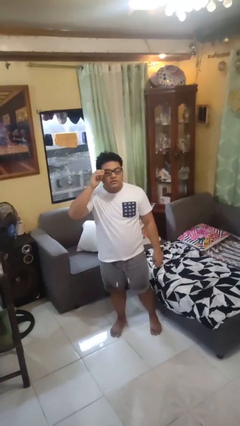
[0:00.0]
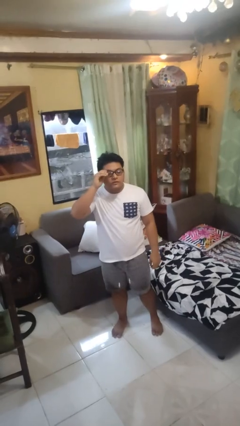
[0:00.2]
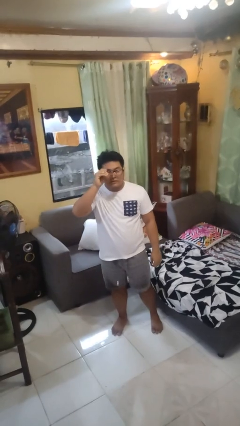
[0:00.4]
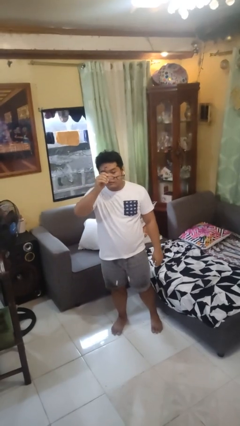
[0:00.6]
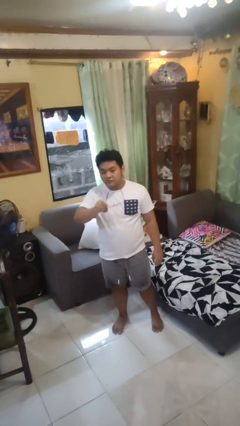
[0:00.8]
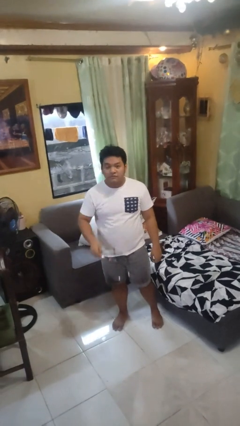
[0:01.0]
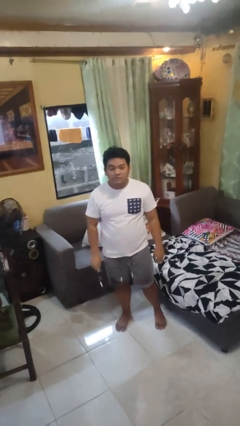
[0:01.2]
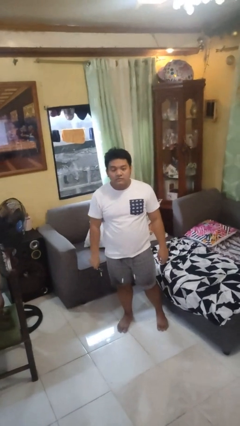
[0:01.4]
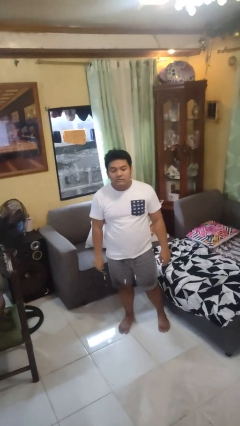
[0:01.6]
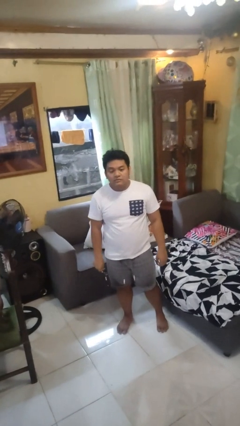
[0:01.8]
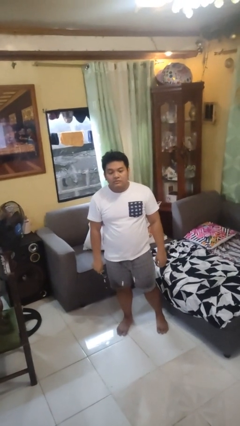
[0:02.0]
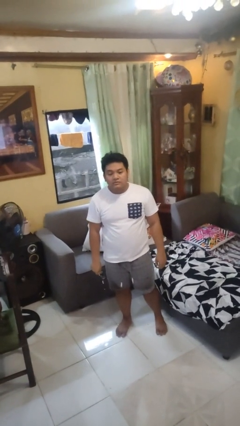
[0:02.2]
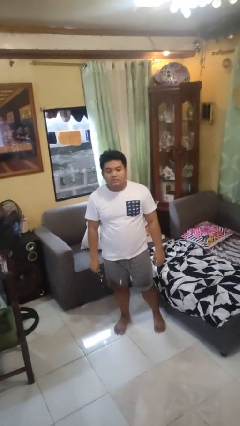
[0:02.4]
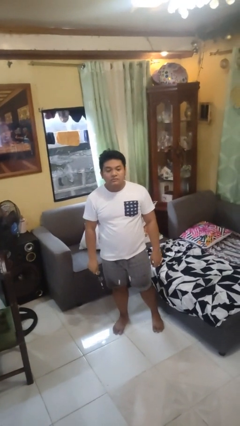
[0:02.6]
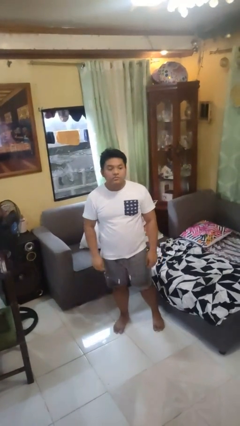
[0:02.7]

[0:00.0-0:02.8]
person takes off glasses

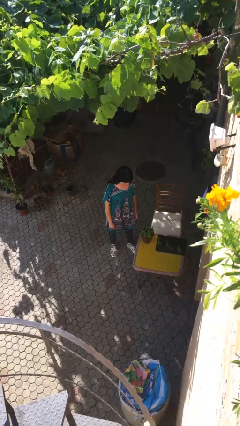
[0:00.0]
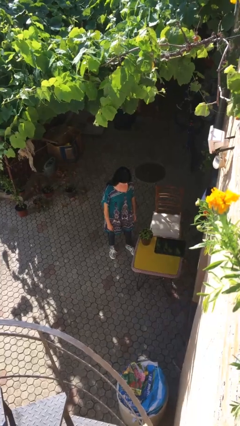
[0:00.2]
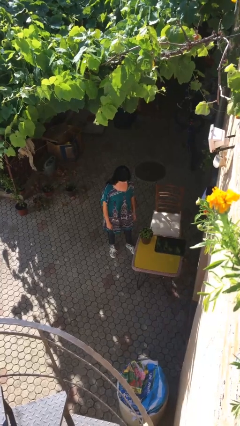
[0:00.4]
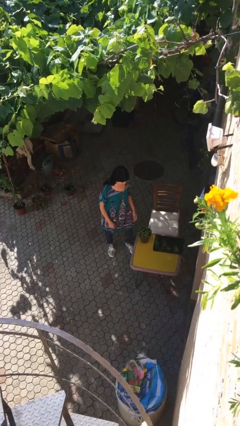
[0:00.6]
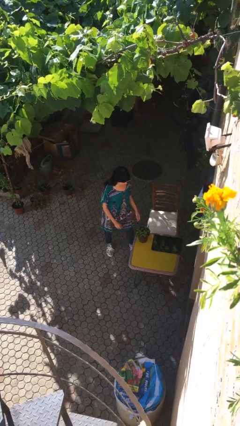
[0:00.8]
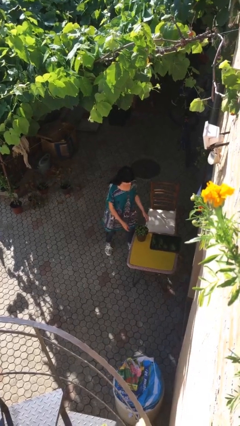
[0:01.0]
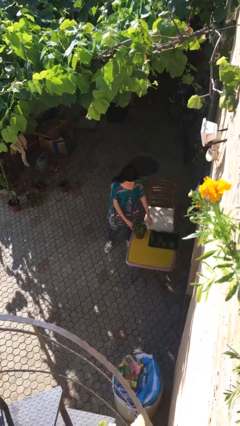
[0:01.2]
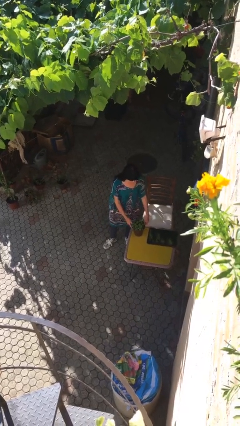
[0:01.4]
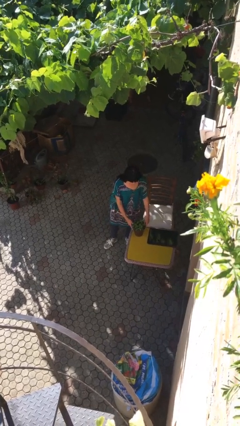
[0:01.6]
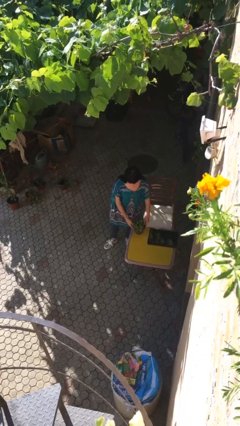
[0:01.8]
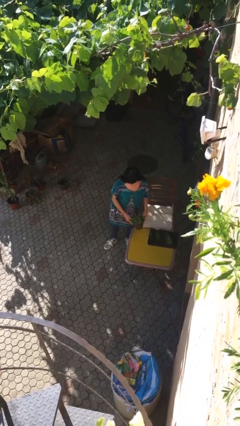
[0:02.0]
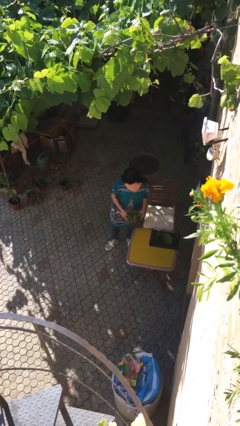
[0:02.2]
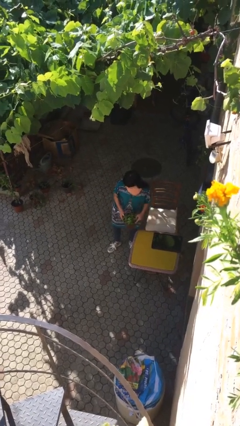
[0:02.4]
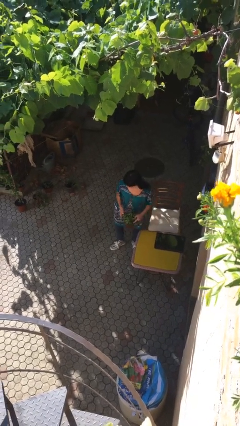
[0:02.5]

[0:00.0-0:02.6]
person picks up object from table

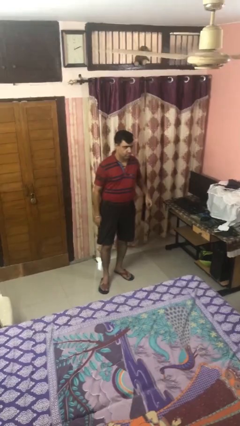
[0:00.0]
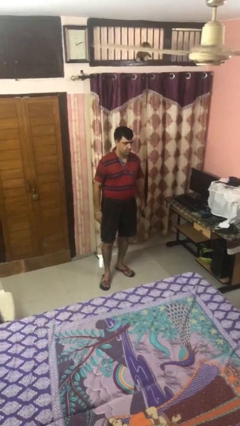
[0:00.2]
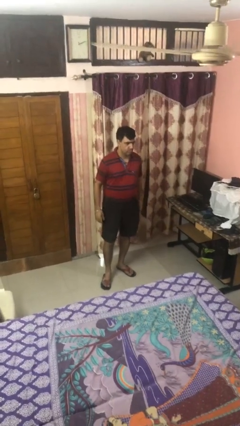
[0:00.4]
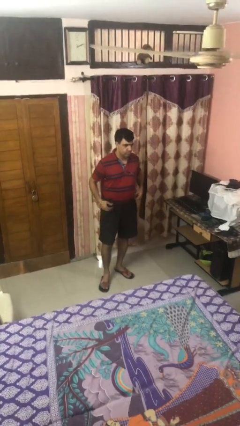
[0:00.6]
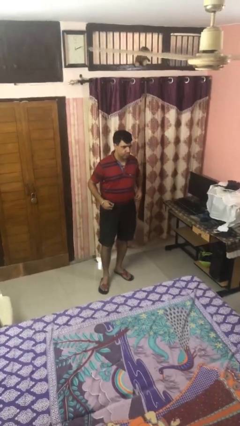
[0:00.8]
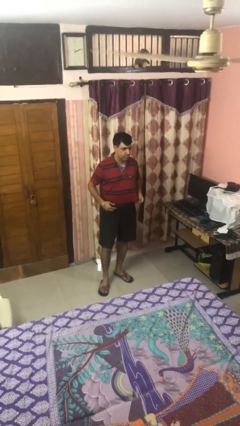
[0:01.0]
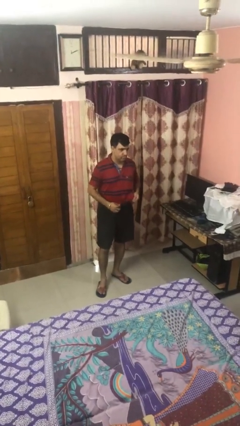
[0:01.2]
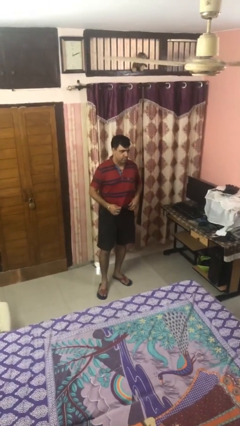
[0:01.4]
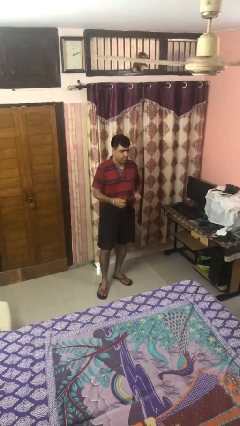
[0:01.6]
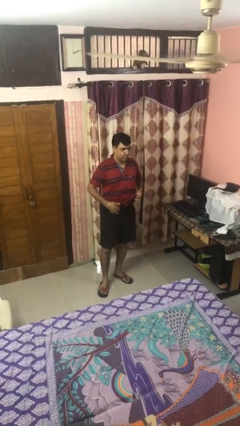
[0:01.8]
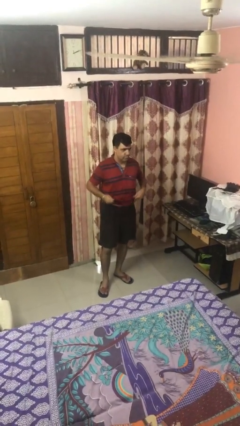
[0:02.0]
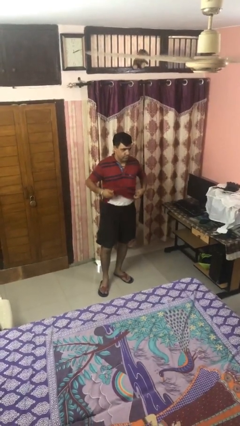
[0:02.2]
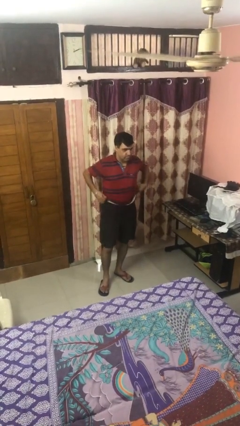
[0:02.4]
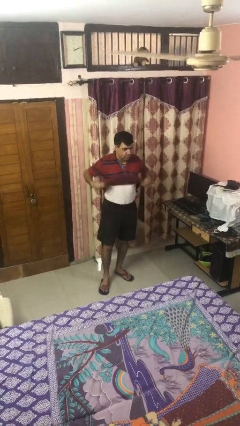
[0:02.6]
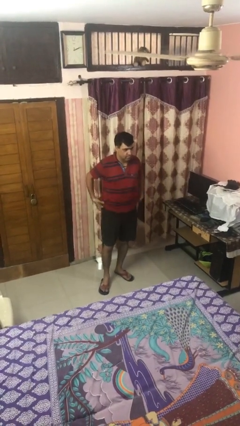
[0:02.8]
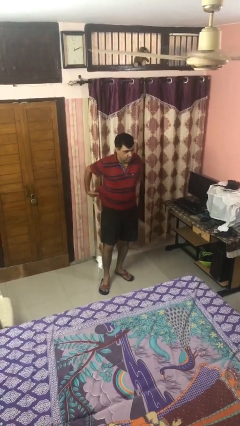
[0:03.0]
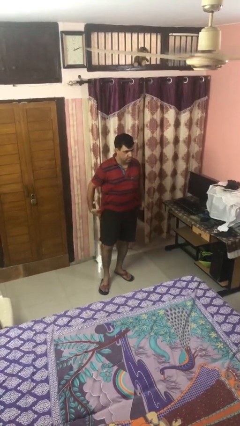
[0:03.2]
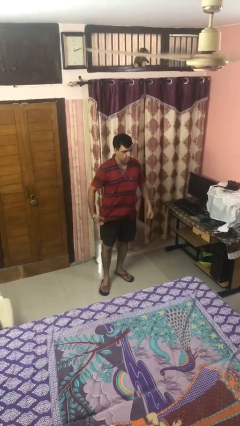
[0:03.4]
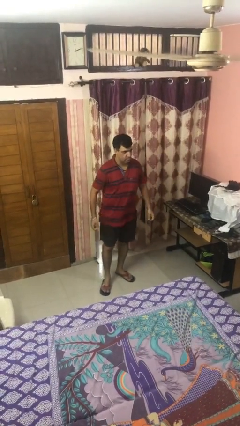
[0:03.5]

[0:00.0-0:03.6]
person untucks shirt

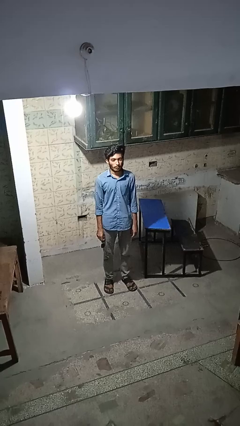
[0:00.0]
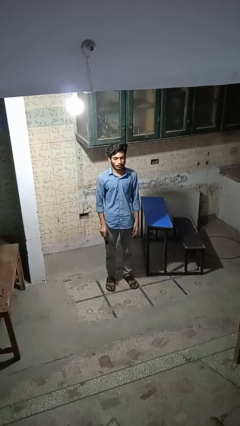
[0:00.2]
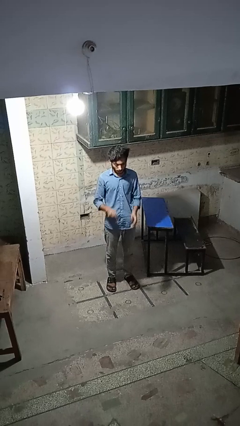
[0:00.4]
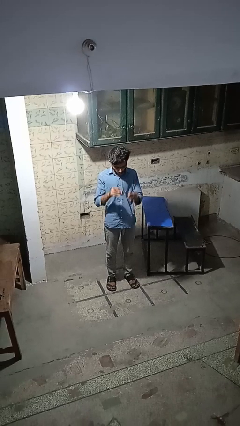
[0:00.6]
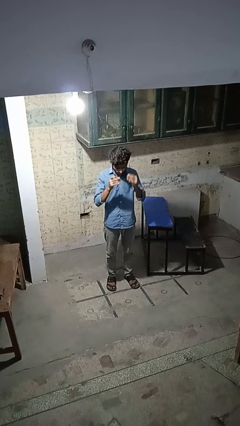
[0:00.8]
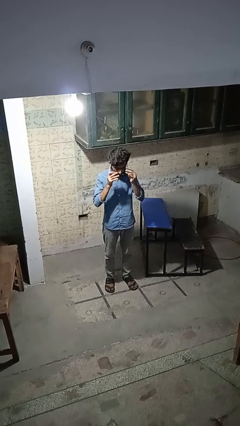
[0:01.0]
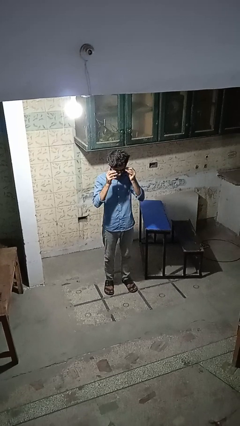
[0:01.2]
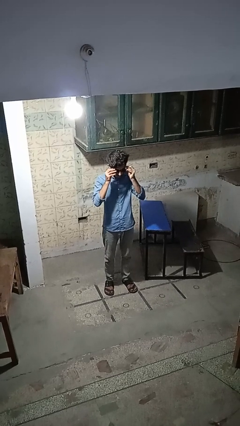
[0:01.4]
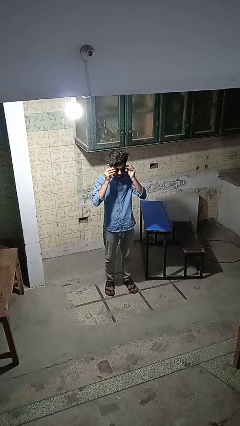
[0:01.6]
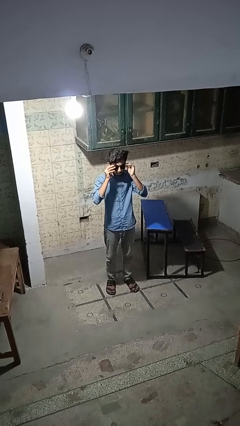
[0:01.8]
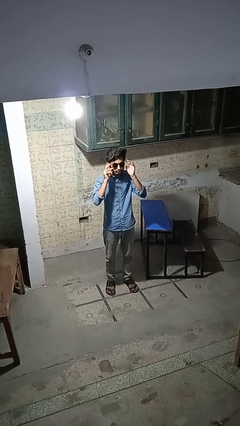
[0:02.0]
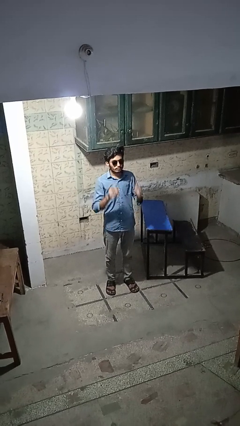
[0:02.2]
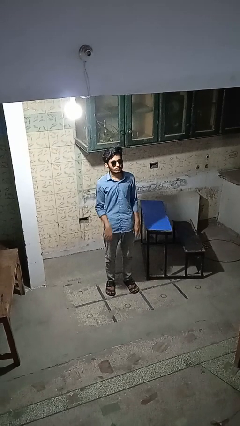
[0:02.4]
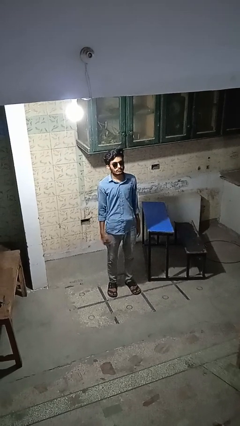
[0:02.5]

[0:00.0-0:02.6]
person puts on sunglasses

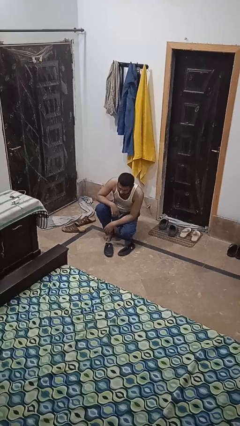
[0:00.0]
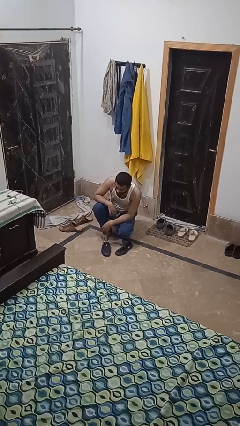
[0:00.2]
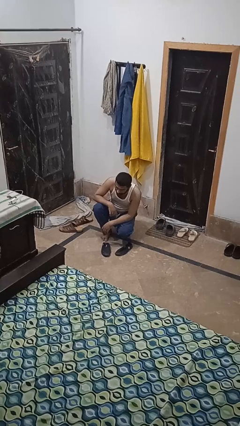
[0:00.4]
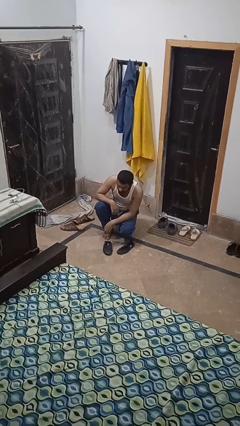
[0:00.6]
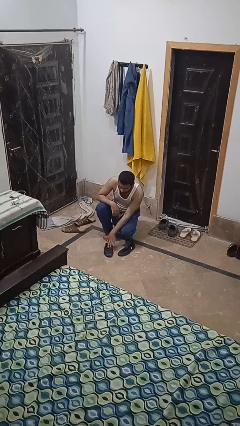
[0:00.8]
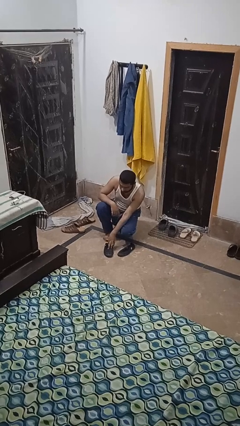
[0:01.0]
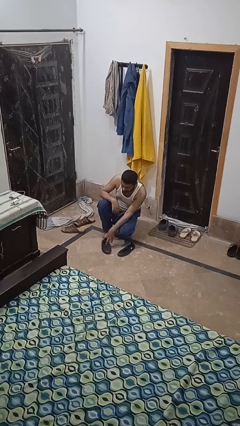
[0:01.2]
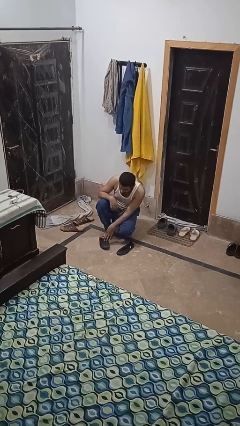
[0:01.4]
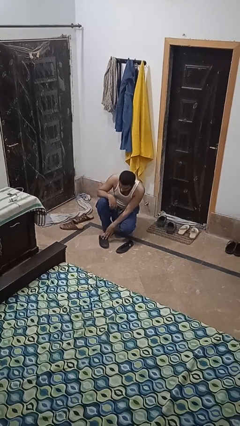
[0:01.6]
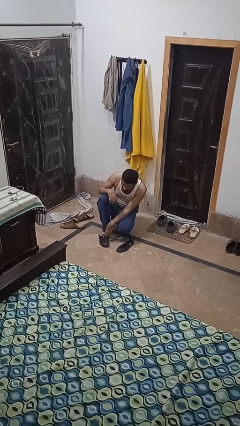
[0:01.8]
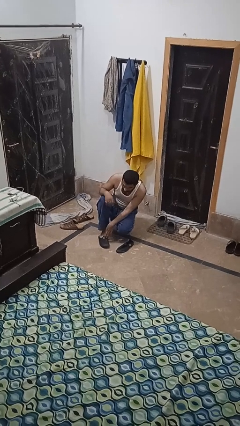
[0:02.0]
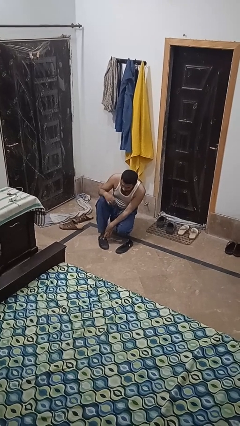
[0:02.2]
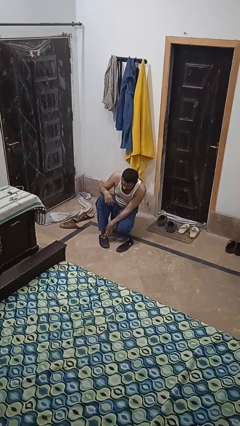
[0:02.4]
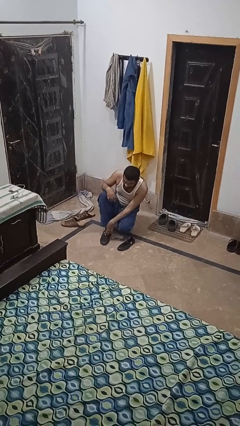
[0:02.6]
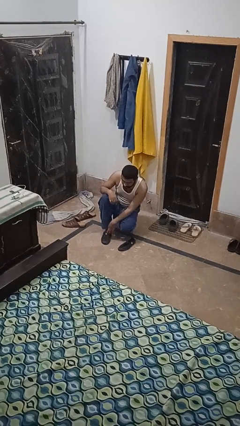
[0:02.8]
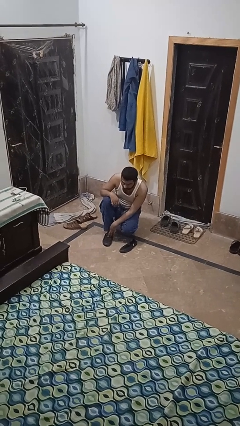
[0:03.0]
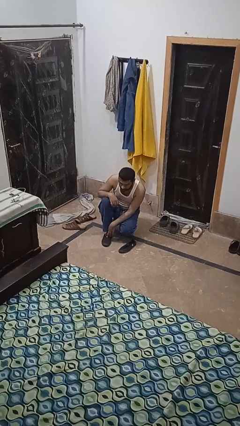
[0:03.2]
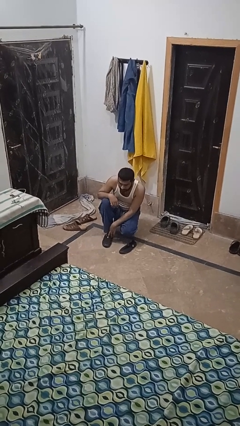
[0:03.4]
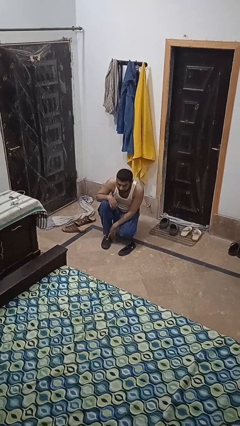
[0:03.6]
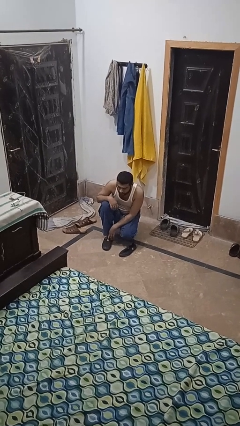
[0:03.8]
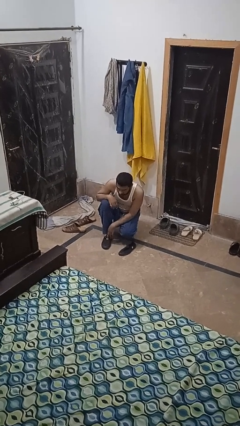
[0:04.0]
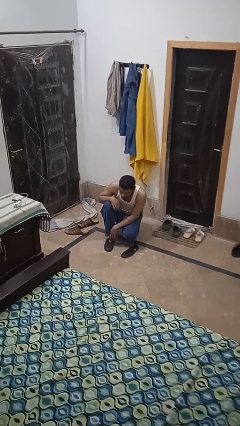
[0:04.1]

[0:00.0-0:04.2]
person puts on shoes

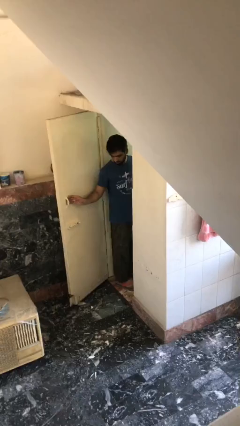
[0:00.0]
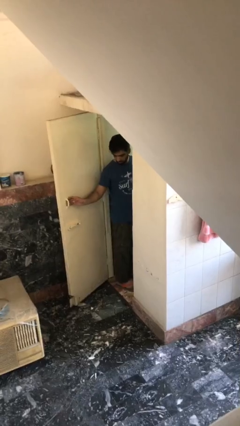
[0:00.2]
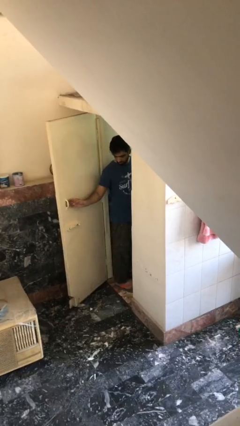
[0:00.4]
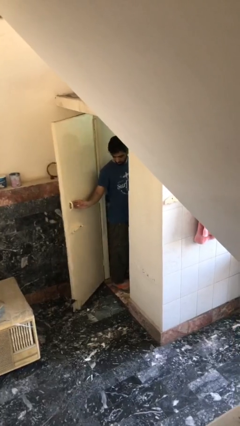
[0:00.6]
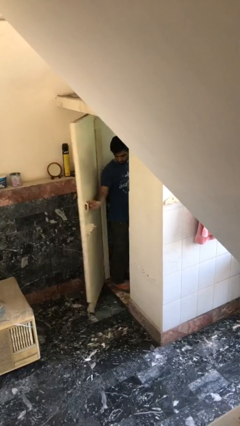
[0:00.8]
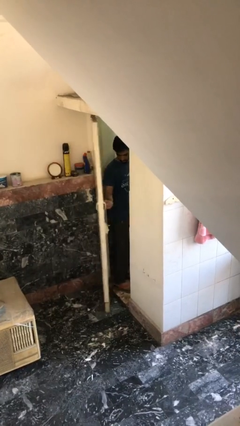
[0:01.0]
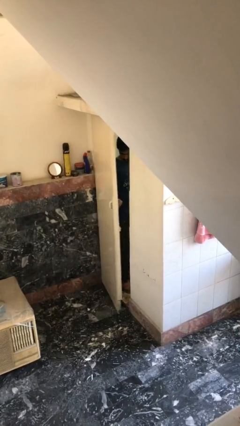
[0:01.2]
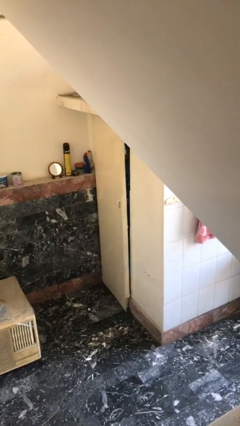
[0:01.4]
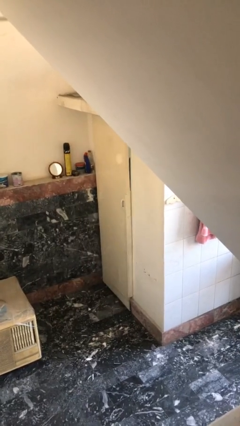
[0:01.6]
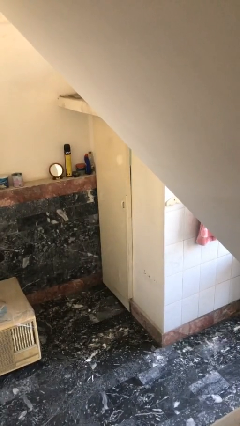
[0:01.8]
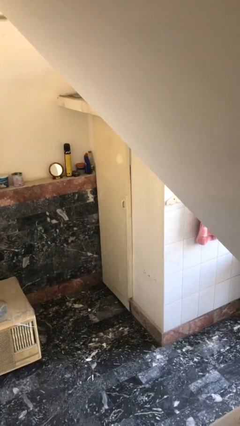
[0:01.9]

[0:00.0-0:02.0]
person closes facility door
